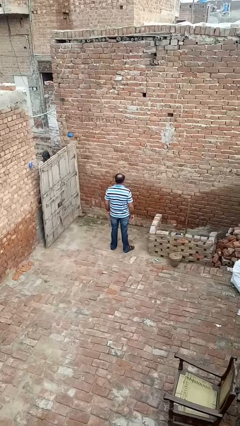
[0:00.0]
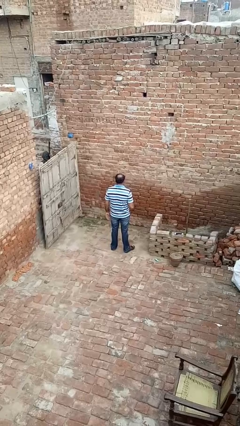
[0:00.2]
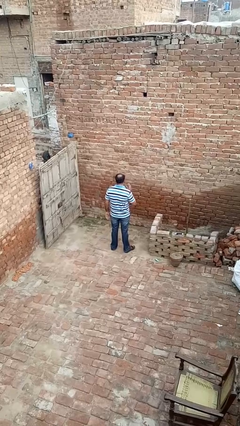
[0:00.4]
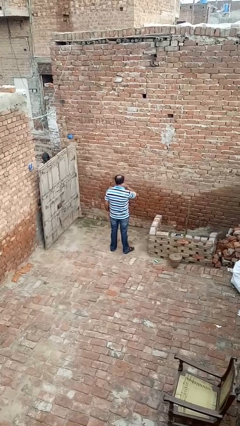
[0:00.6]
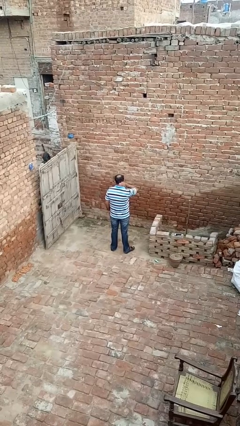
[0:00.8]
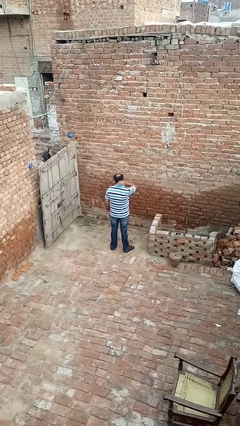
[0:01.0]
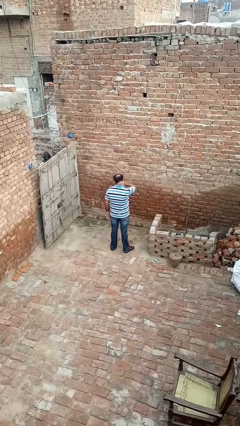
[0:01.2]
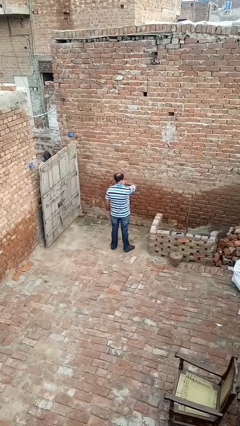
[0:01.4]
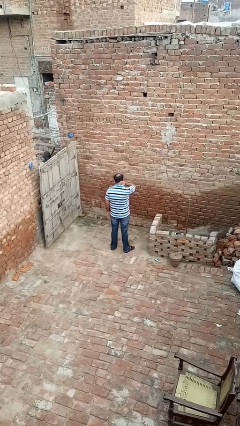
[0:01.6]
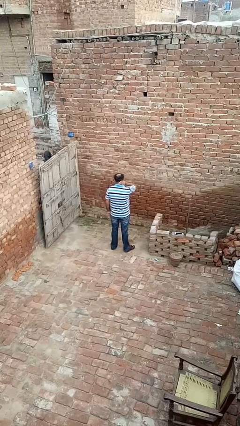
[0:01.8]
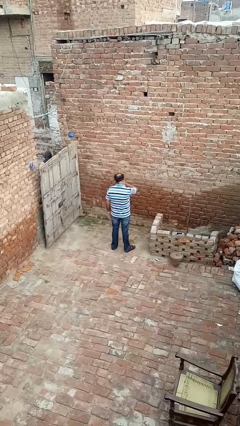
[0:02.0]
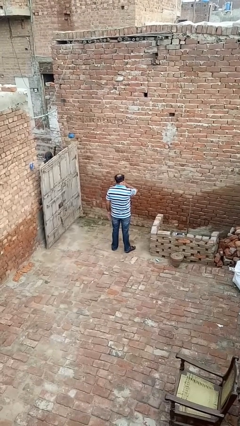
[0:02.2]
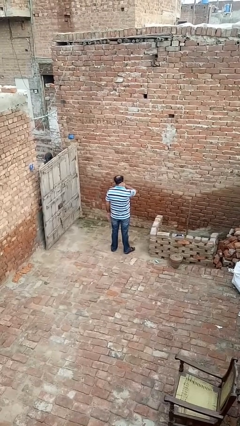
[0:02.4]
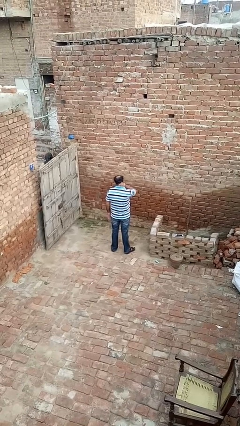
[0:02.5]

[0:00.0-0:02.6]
person rubs neck

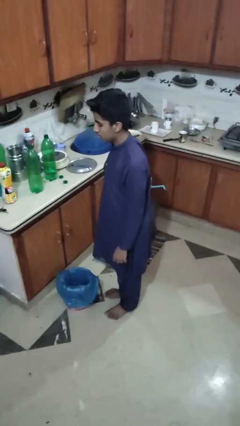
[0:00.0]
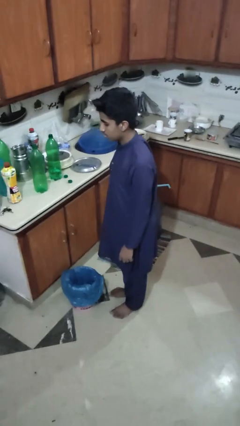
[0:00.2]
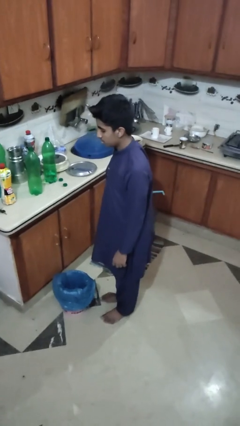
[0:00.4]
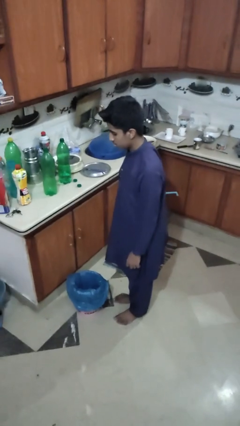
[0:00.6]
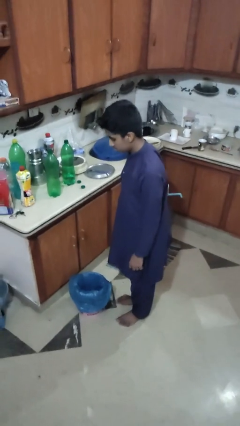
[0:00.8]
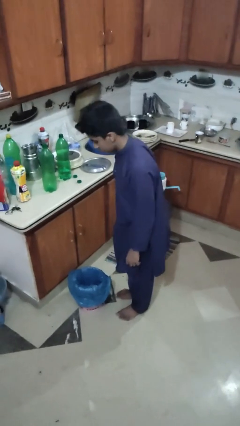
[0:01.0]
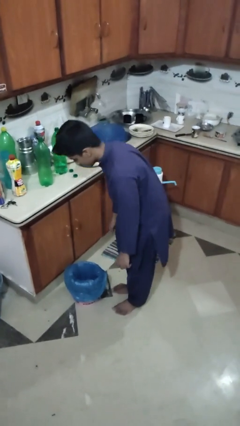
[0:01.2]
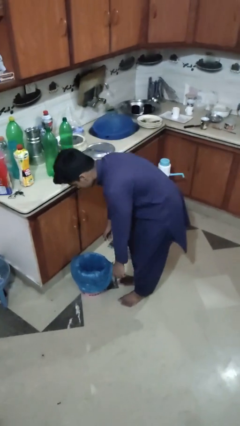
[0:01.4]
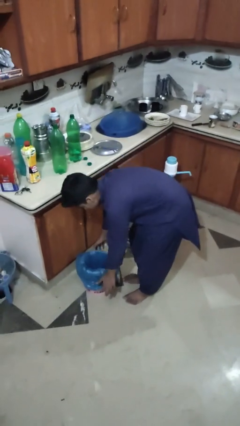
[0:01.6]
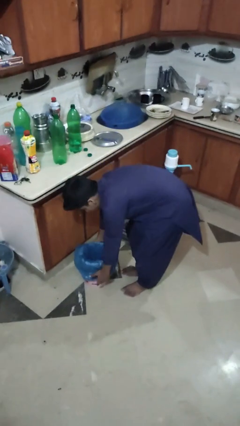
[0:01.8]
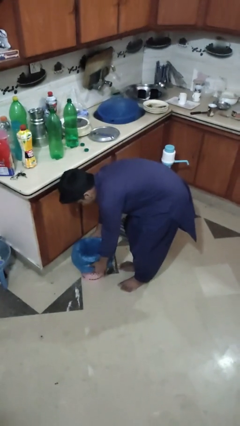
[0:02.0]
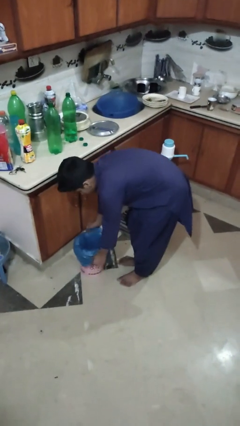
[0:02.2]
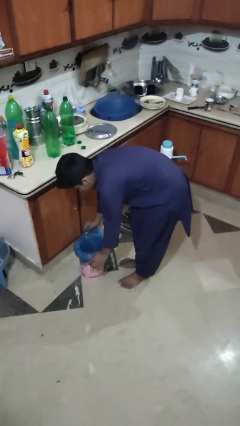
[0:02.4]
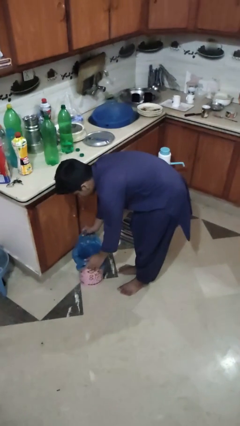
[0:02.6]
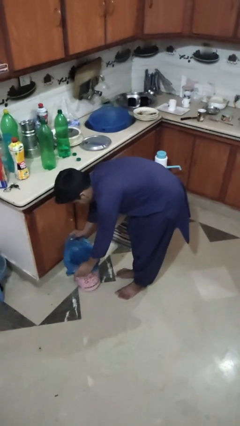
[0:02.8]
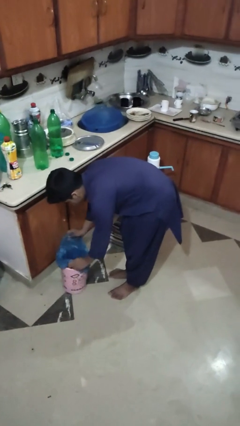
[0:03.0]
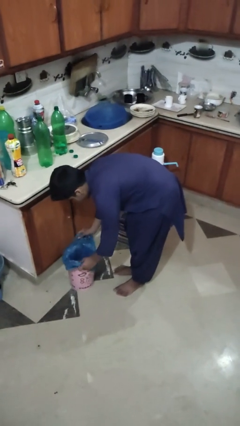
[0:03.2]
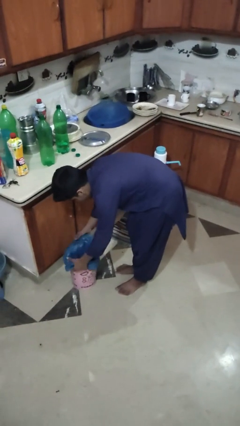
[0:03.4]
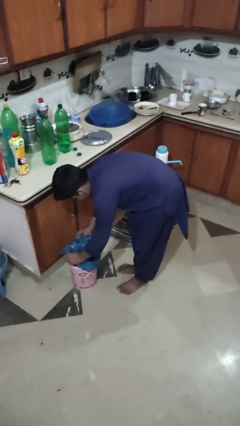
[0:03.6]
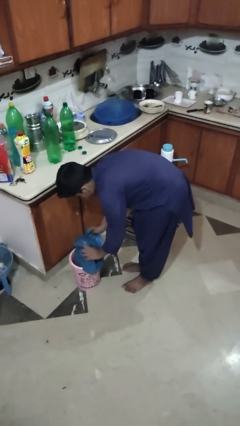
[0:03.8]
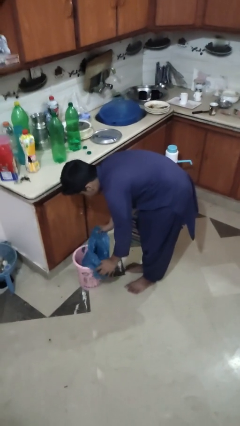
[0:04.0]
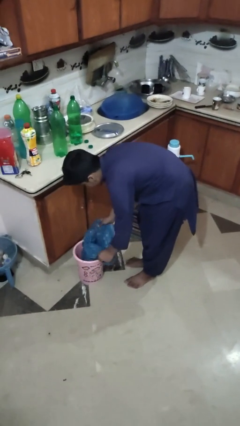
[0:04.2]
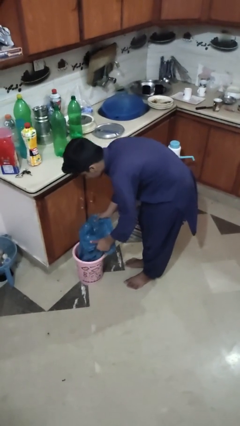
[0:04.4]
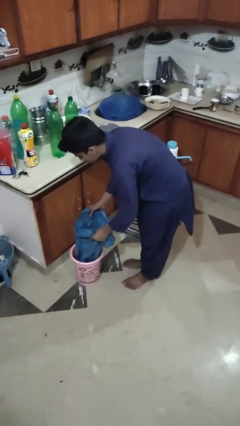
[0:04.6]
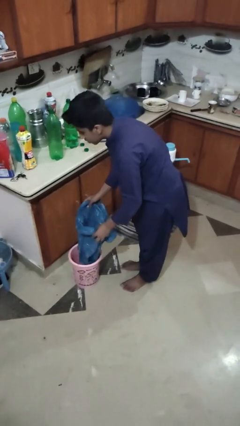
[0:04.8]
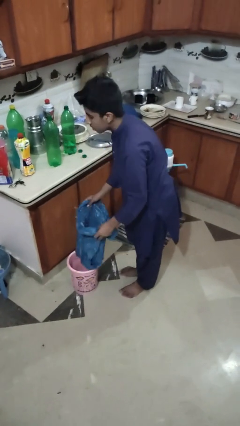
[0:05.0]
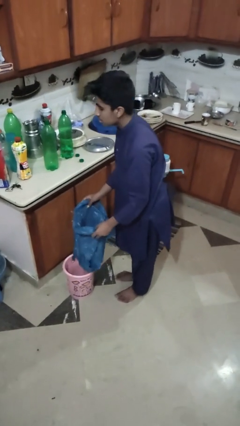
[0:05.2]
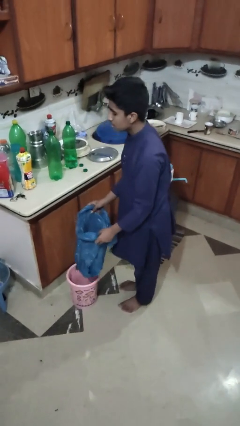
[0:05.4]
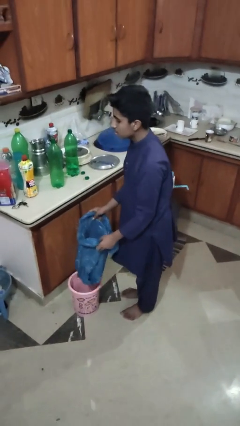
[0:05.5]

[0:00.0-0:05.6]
person removes trashbag from trashcan

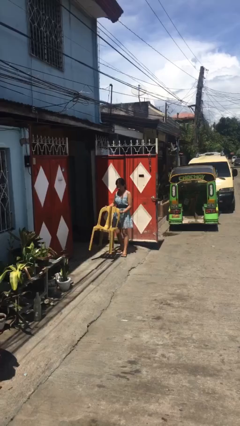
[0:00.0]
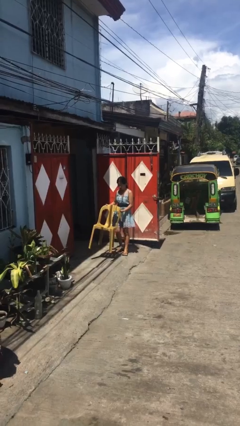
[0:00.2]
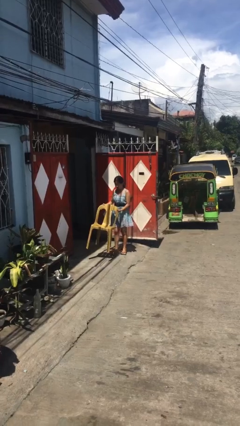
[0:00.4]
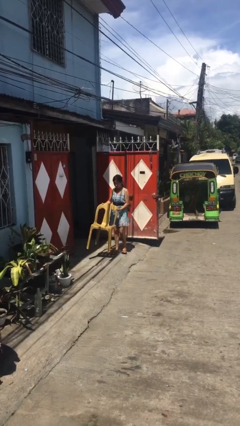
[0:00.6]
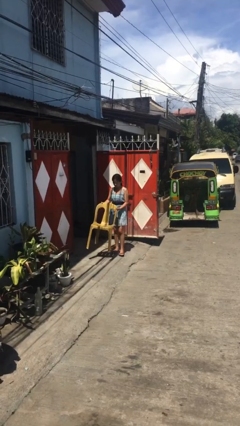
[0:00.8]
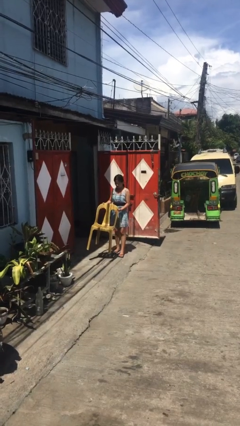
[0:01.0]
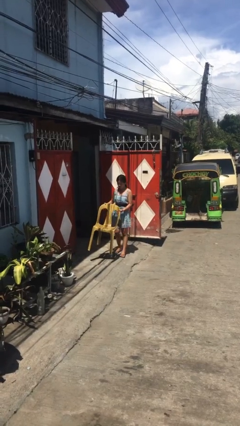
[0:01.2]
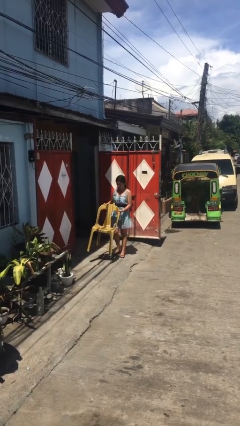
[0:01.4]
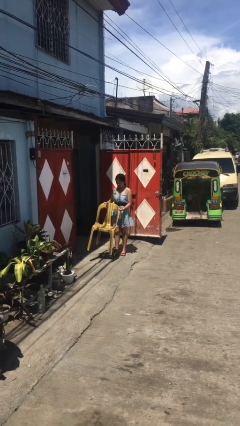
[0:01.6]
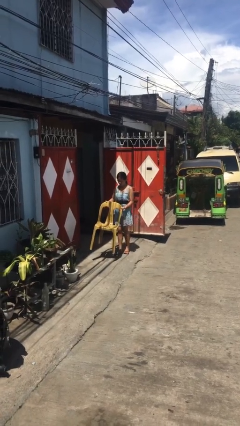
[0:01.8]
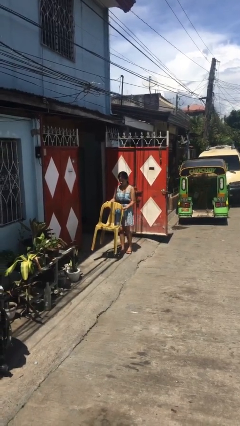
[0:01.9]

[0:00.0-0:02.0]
person carries heavy object

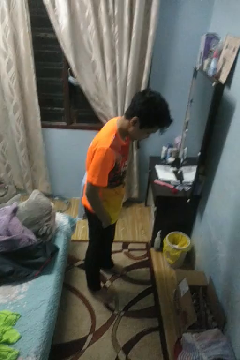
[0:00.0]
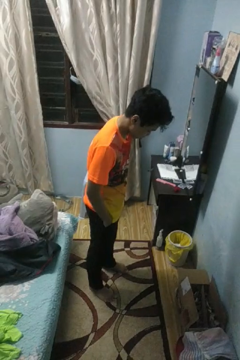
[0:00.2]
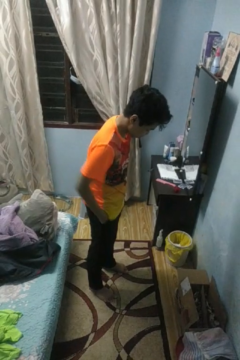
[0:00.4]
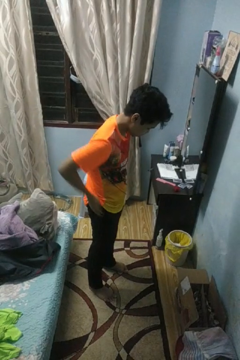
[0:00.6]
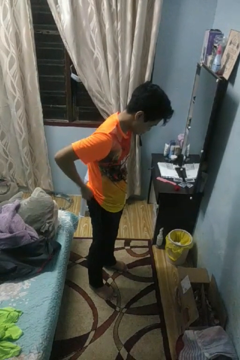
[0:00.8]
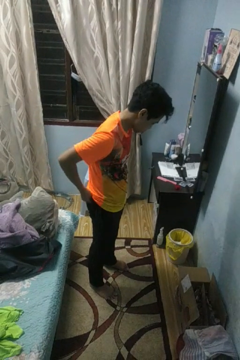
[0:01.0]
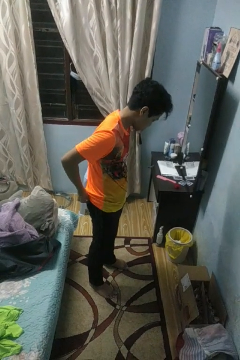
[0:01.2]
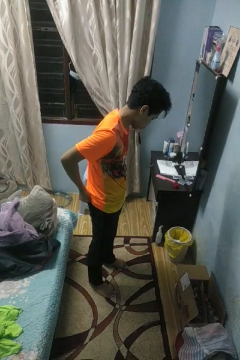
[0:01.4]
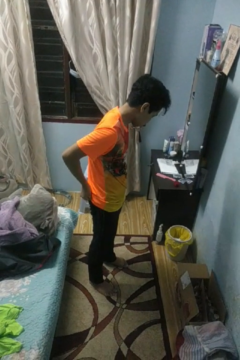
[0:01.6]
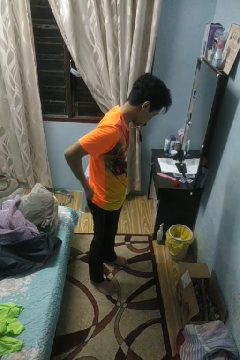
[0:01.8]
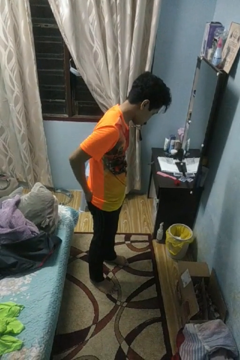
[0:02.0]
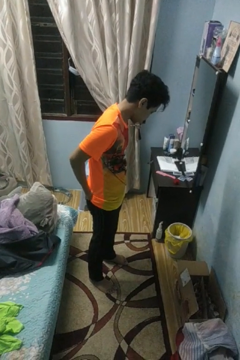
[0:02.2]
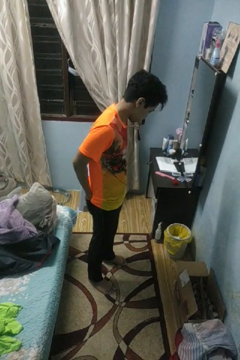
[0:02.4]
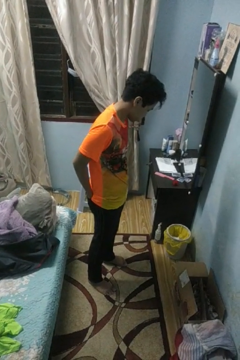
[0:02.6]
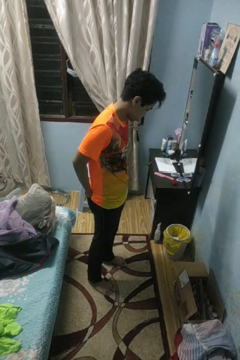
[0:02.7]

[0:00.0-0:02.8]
person puts hands in back pockets

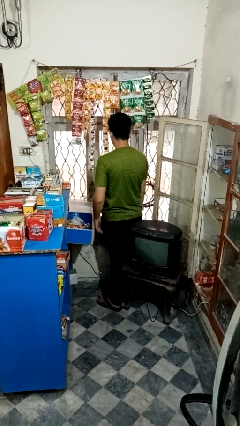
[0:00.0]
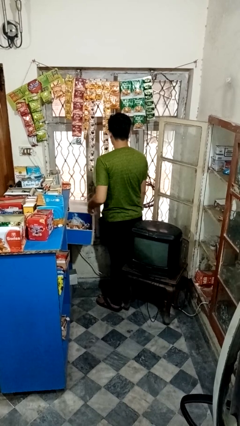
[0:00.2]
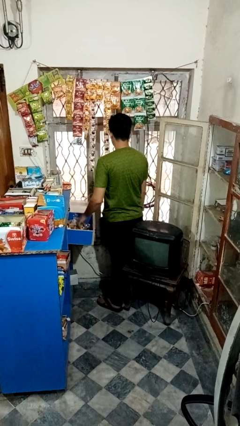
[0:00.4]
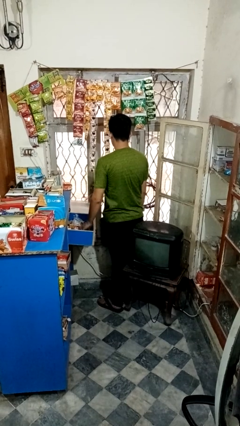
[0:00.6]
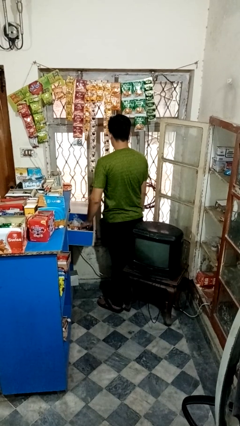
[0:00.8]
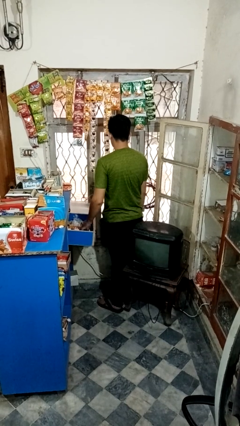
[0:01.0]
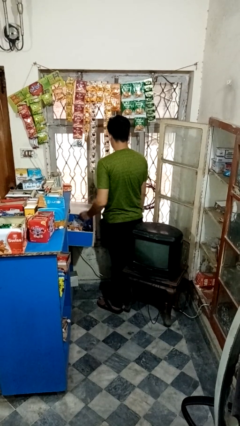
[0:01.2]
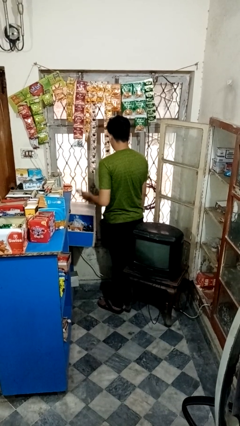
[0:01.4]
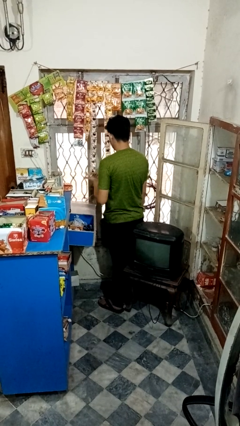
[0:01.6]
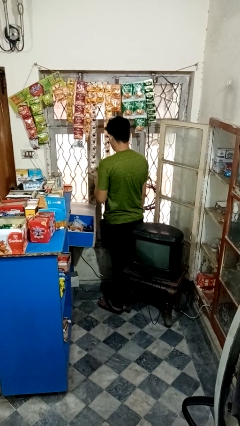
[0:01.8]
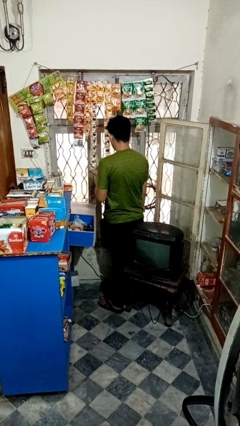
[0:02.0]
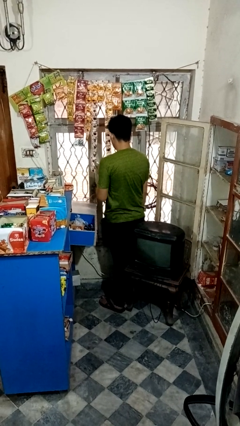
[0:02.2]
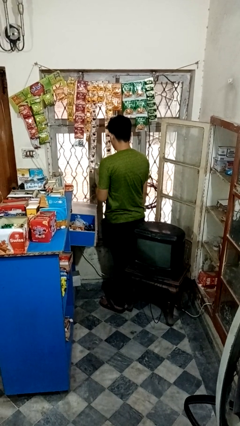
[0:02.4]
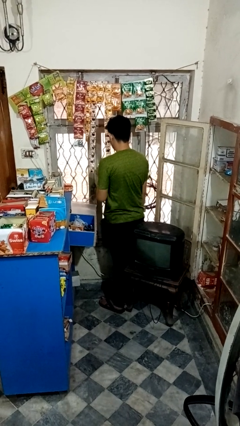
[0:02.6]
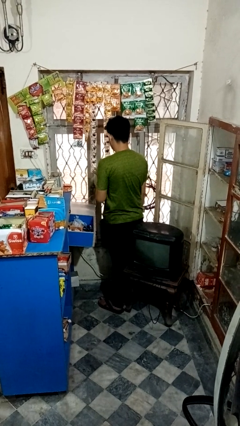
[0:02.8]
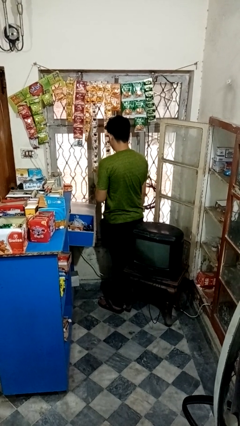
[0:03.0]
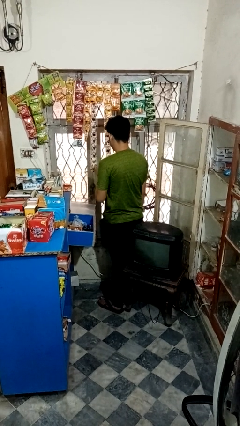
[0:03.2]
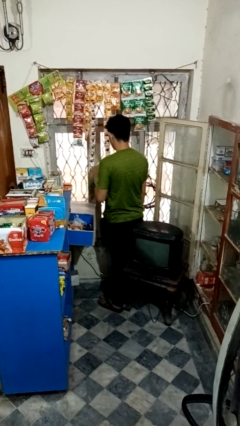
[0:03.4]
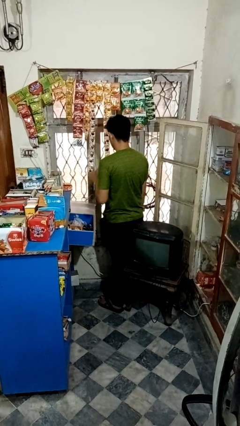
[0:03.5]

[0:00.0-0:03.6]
person searches in kitchen drawer

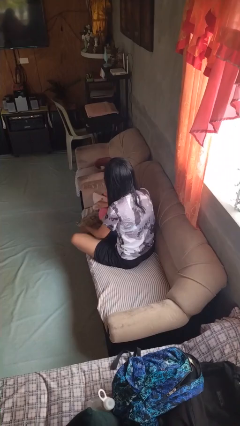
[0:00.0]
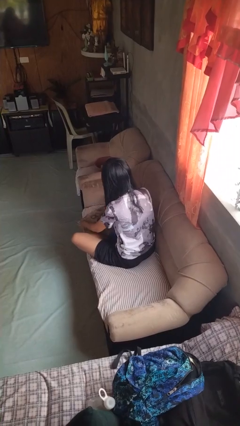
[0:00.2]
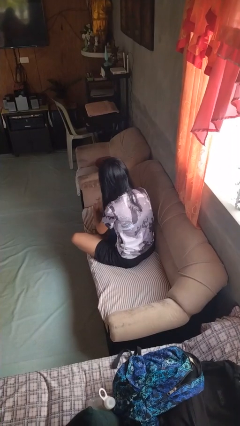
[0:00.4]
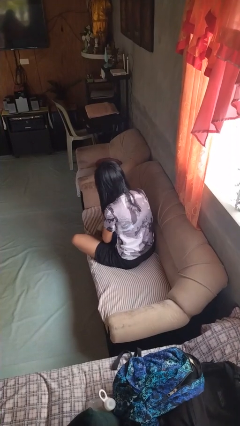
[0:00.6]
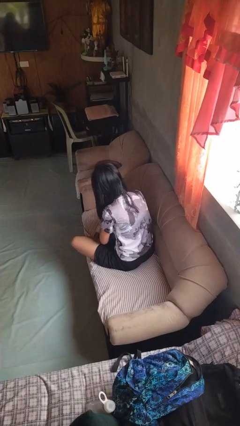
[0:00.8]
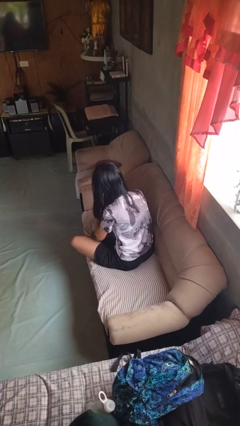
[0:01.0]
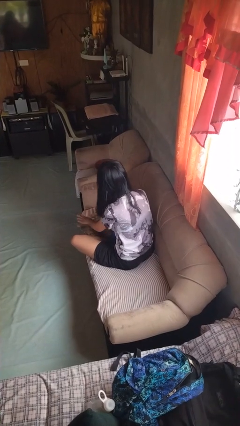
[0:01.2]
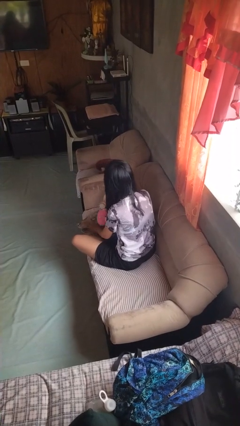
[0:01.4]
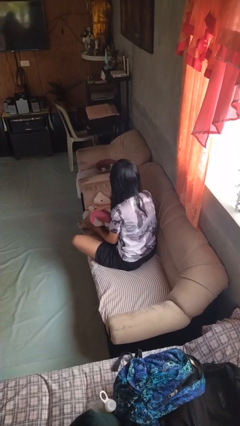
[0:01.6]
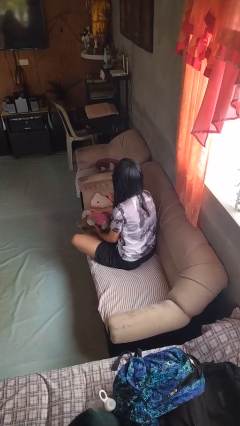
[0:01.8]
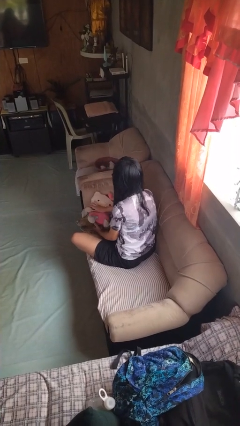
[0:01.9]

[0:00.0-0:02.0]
person searches in couch
